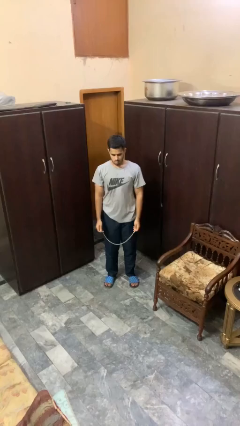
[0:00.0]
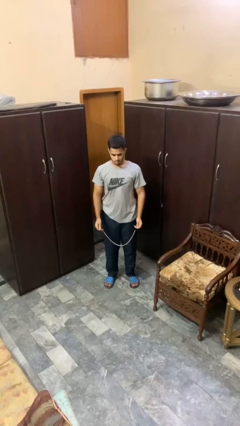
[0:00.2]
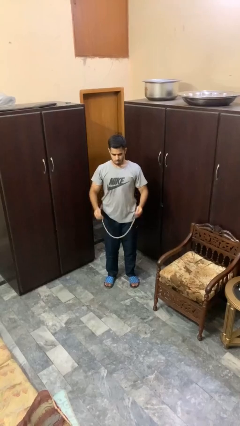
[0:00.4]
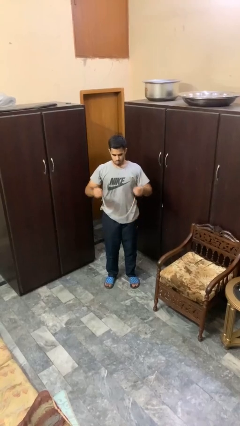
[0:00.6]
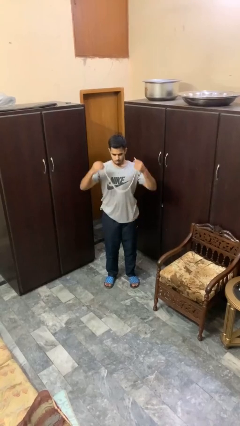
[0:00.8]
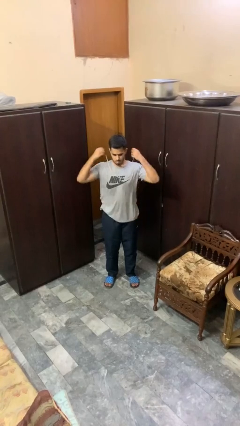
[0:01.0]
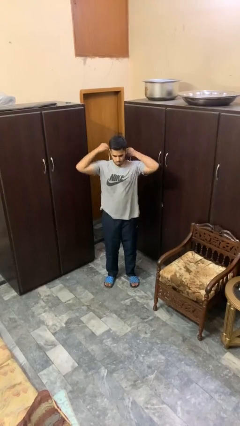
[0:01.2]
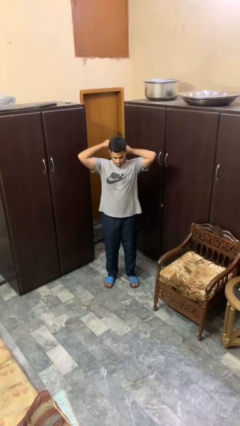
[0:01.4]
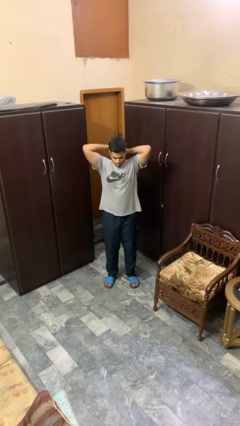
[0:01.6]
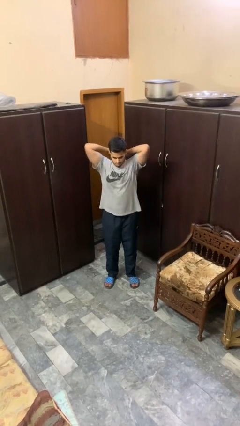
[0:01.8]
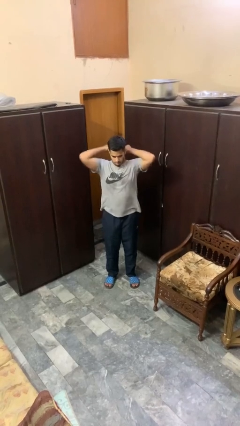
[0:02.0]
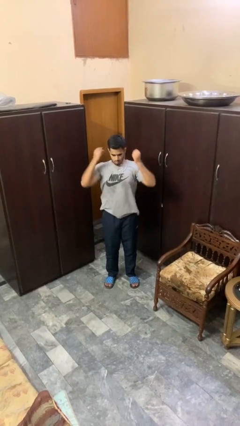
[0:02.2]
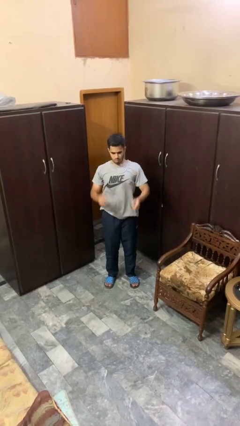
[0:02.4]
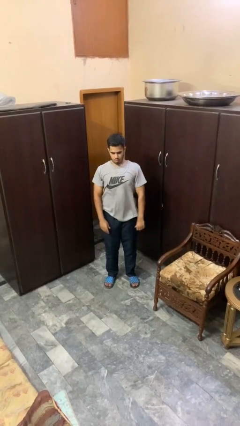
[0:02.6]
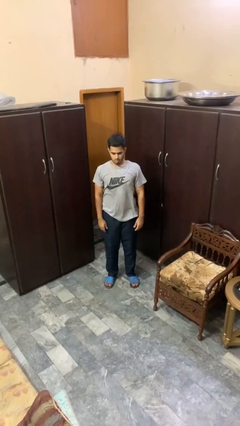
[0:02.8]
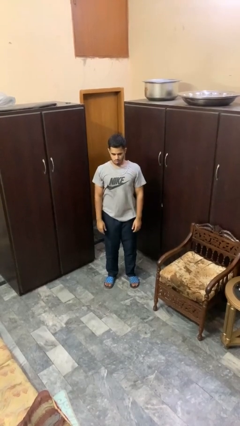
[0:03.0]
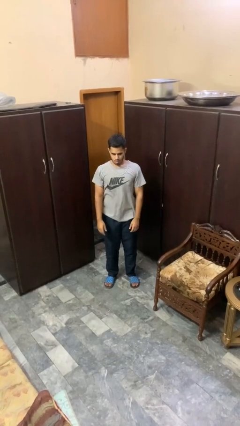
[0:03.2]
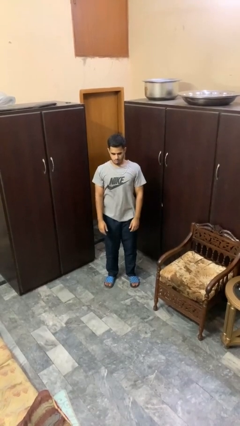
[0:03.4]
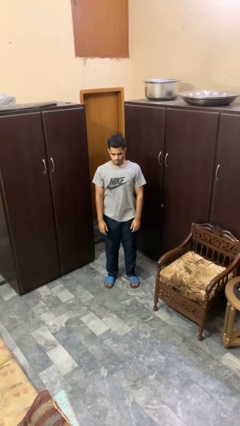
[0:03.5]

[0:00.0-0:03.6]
person puts on necklace

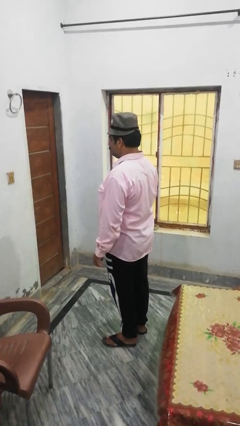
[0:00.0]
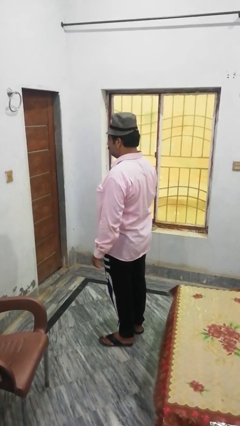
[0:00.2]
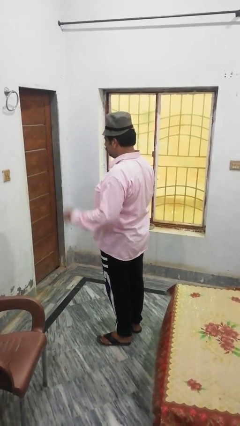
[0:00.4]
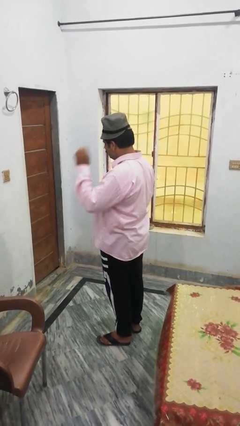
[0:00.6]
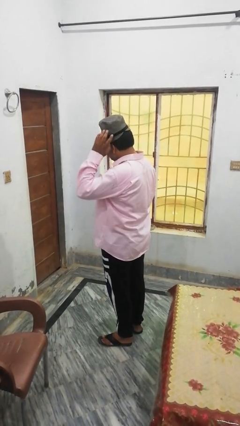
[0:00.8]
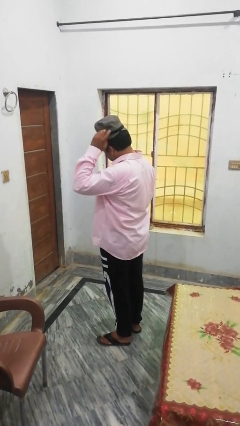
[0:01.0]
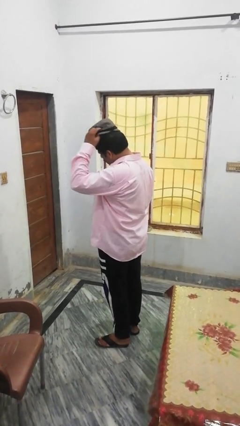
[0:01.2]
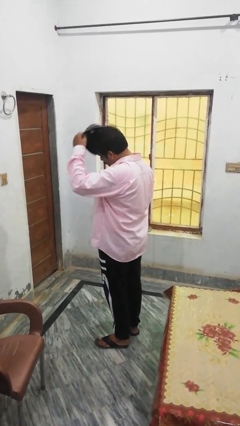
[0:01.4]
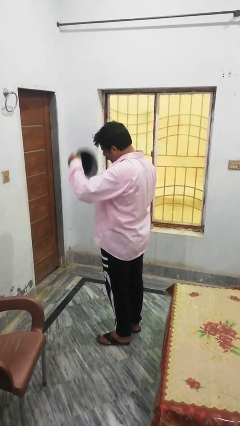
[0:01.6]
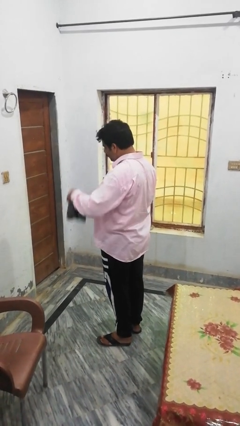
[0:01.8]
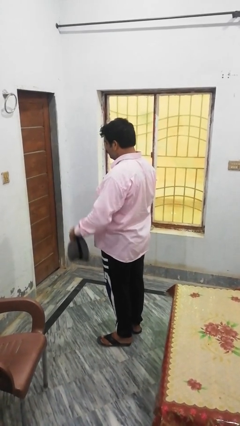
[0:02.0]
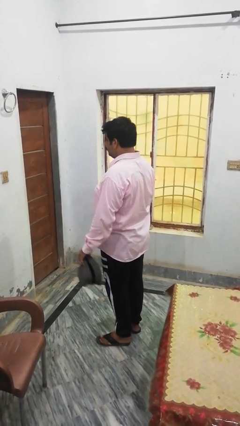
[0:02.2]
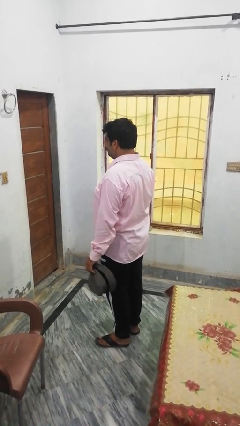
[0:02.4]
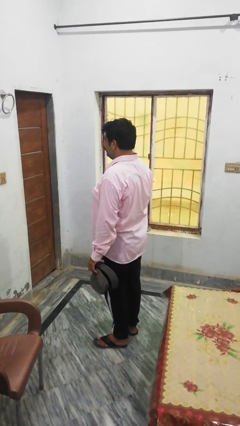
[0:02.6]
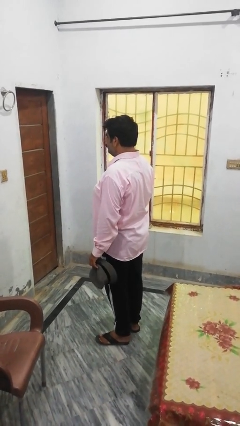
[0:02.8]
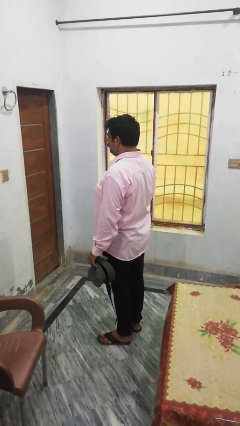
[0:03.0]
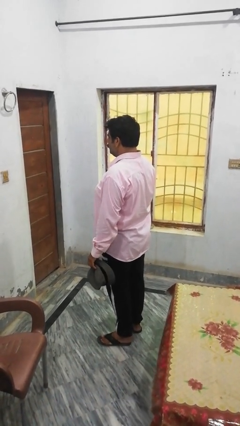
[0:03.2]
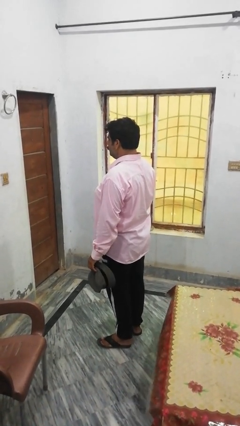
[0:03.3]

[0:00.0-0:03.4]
person takes off hat

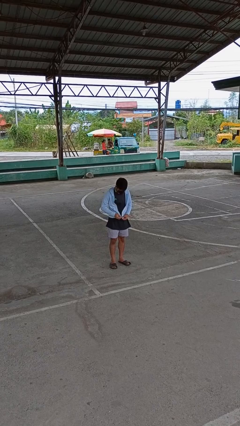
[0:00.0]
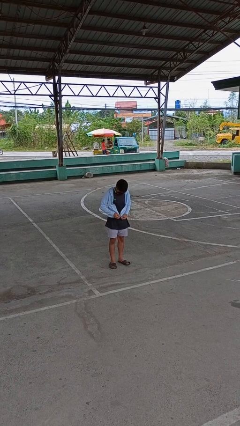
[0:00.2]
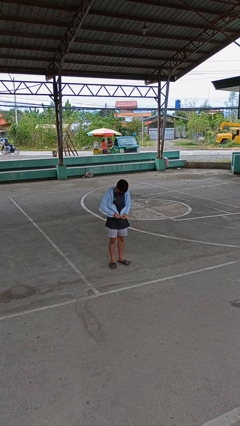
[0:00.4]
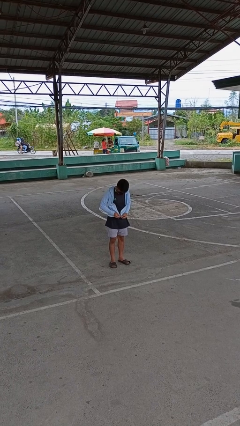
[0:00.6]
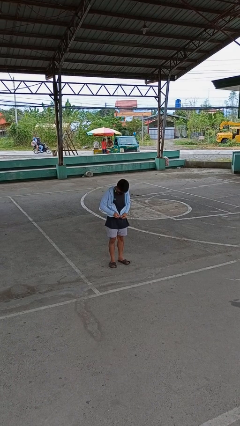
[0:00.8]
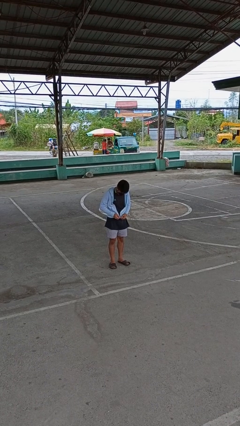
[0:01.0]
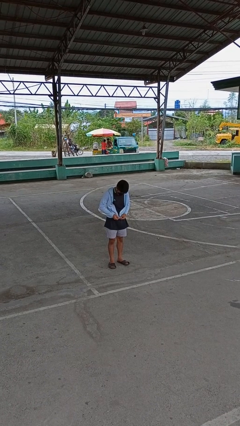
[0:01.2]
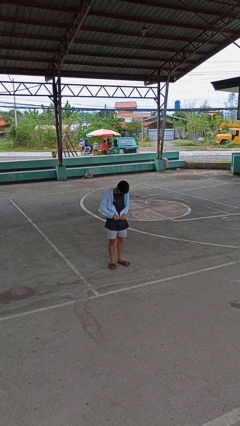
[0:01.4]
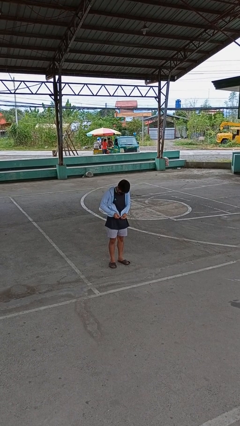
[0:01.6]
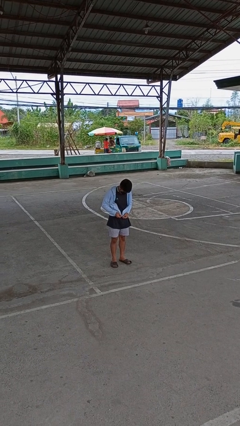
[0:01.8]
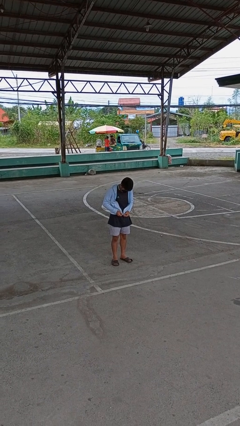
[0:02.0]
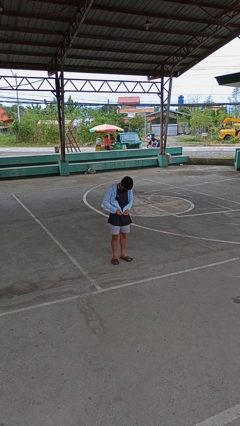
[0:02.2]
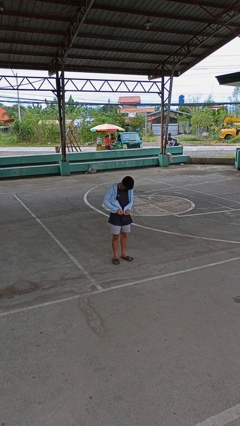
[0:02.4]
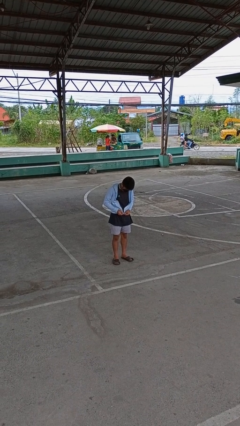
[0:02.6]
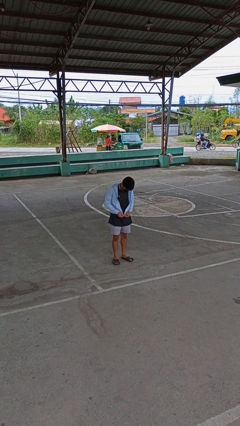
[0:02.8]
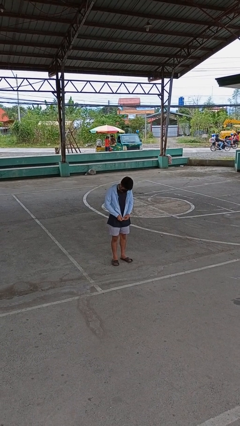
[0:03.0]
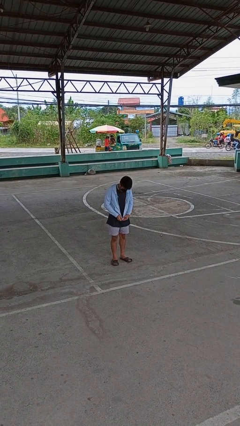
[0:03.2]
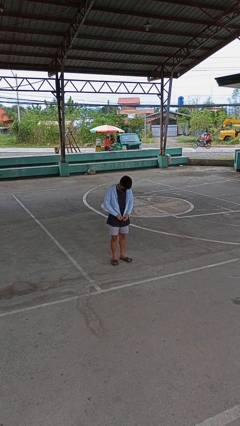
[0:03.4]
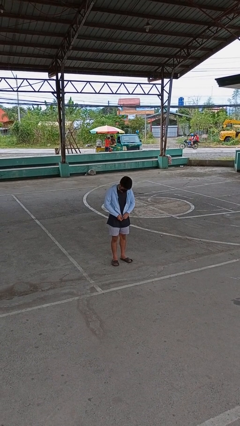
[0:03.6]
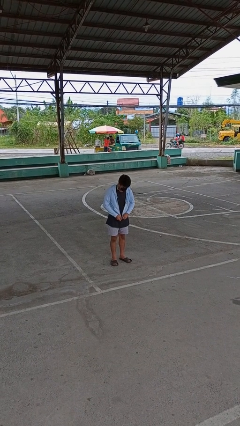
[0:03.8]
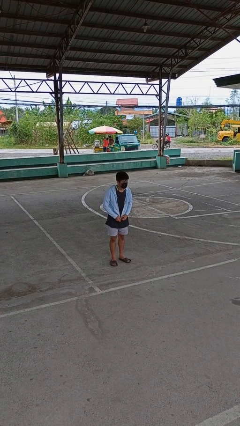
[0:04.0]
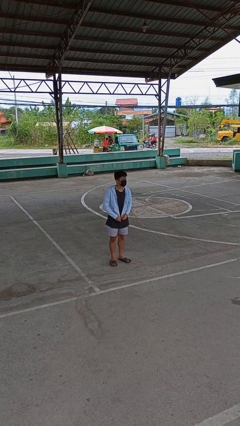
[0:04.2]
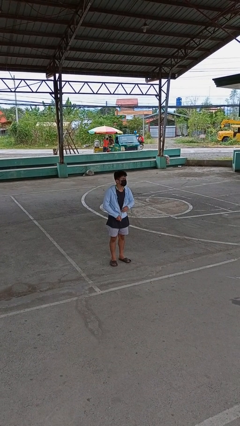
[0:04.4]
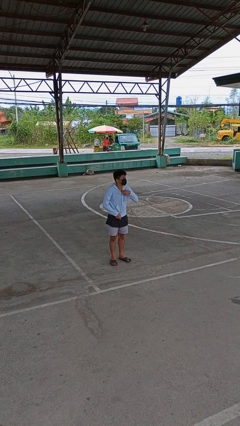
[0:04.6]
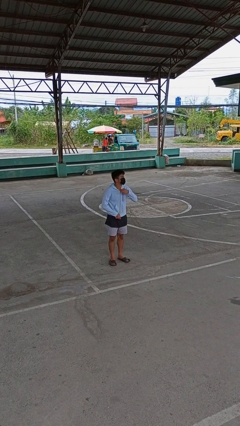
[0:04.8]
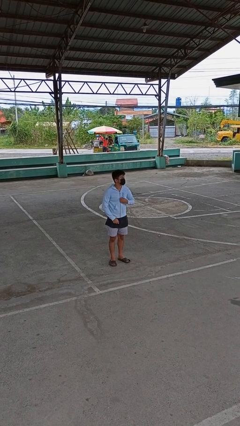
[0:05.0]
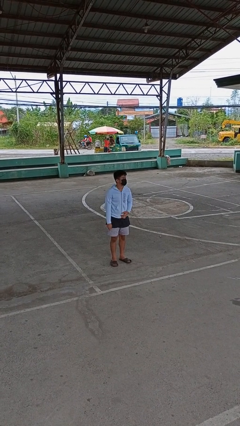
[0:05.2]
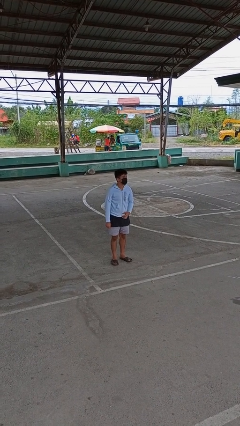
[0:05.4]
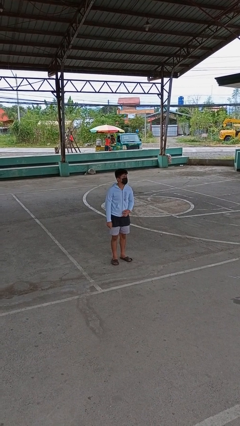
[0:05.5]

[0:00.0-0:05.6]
person zips up jacket

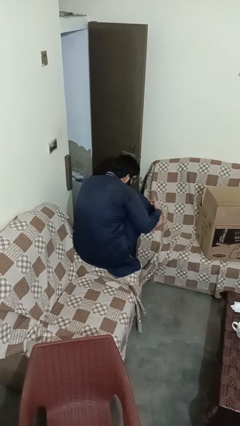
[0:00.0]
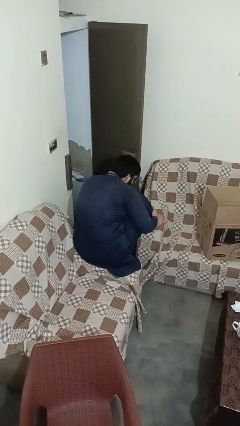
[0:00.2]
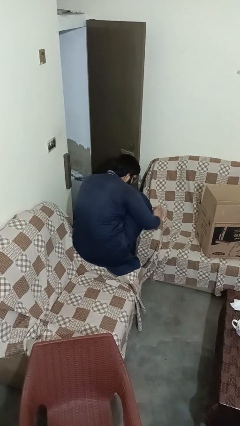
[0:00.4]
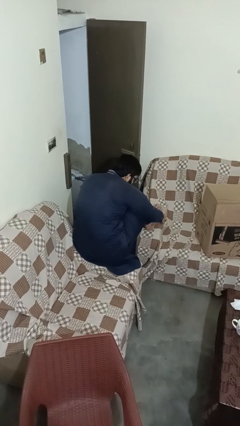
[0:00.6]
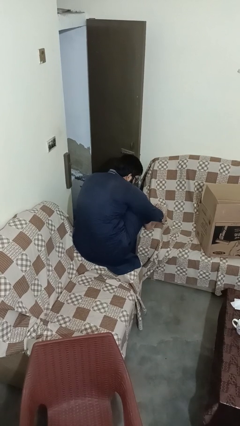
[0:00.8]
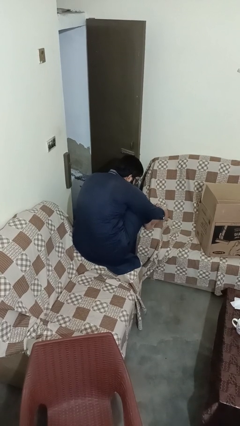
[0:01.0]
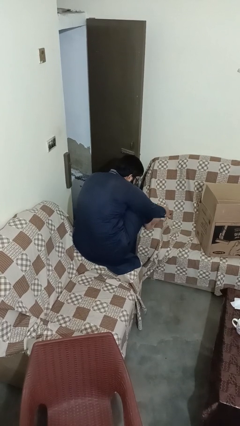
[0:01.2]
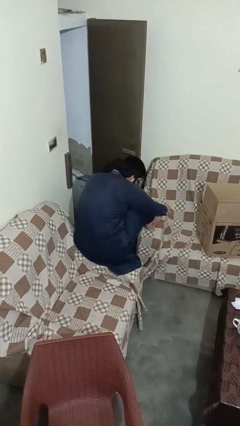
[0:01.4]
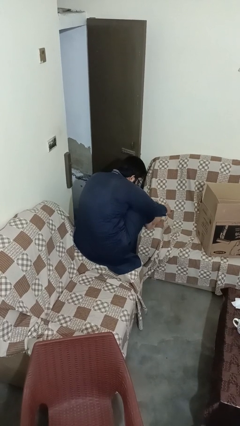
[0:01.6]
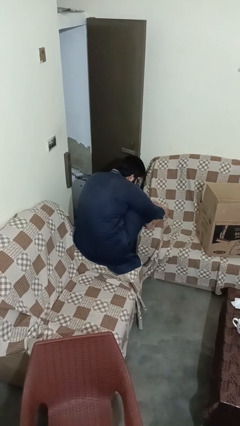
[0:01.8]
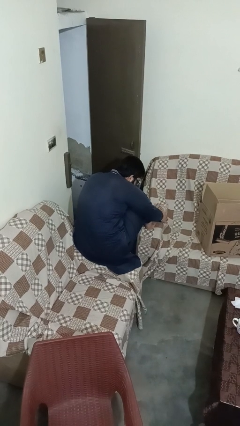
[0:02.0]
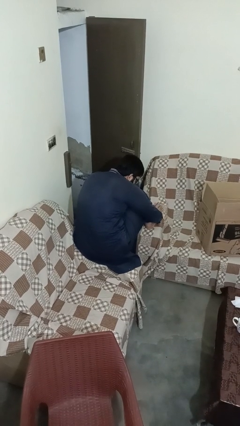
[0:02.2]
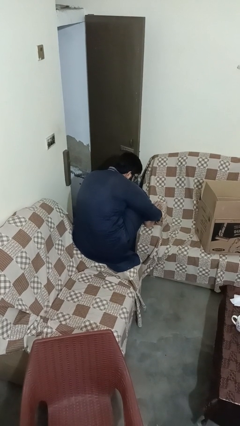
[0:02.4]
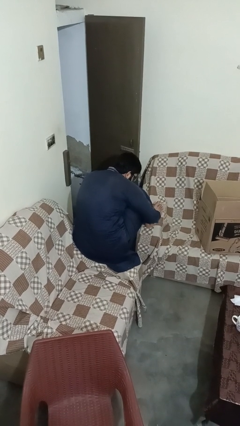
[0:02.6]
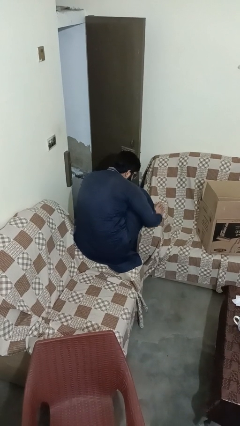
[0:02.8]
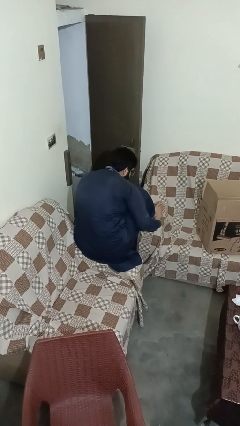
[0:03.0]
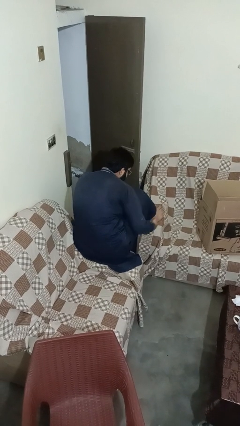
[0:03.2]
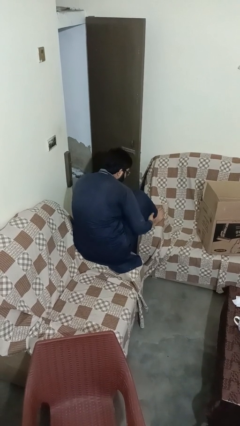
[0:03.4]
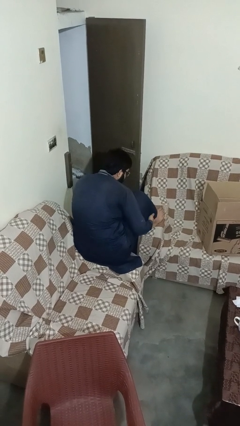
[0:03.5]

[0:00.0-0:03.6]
person rubs foot

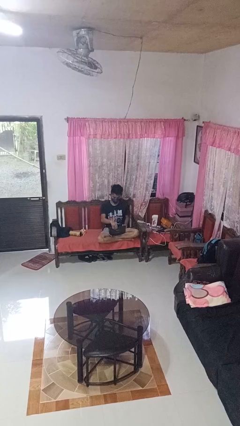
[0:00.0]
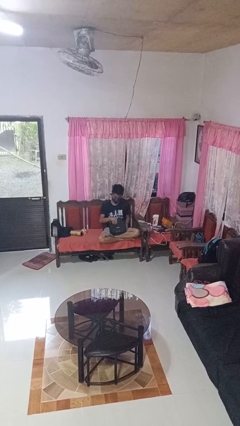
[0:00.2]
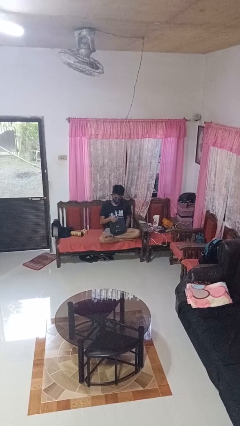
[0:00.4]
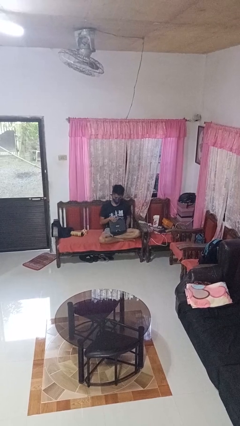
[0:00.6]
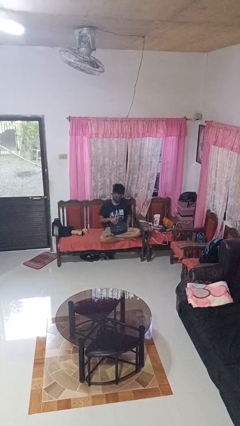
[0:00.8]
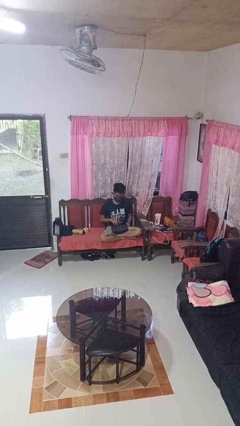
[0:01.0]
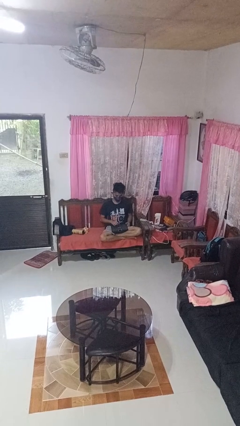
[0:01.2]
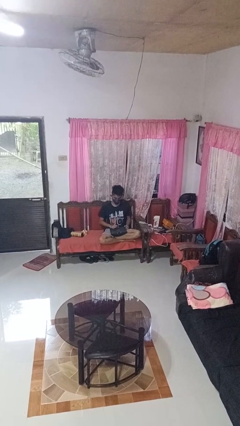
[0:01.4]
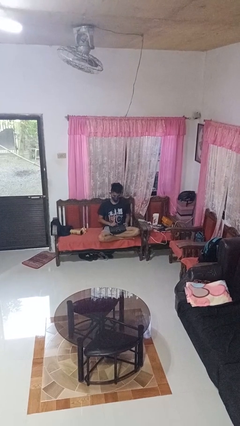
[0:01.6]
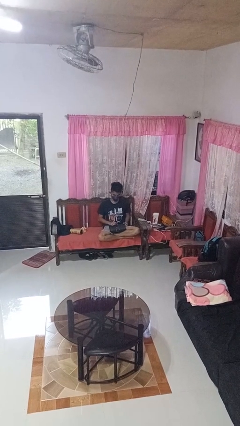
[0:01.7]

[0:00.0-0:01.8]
person closes laptop
